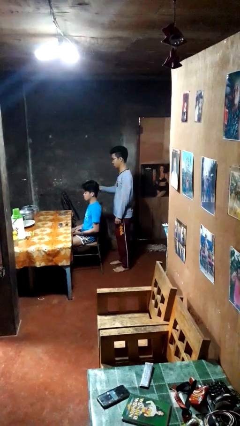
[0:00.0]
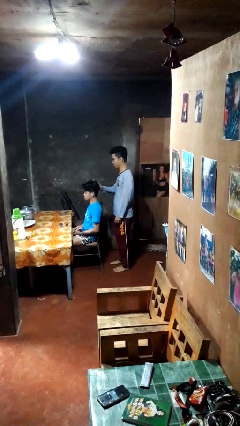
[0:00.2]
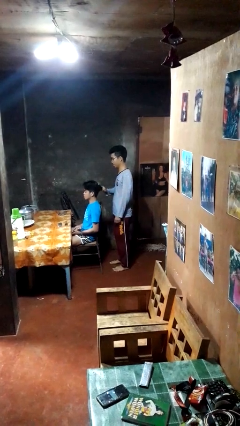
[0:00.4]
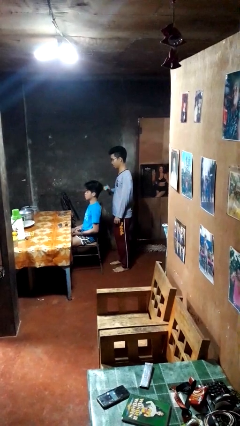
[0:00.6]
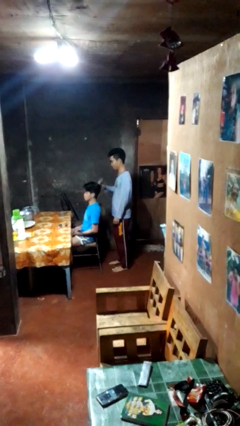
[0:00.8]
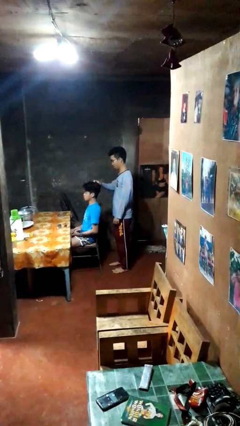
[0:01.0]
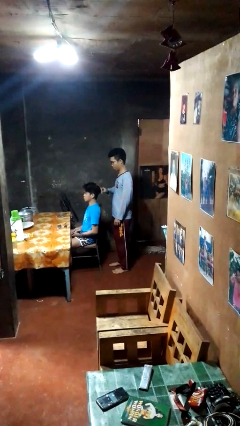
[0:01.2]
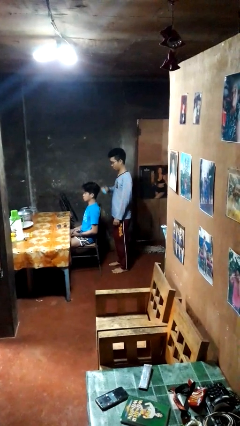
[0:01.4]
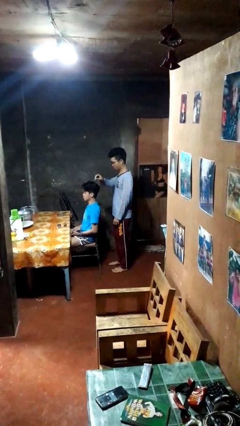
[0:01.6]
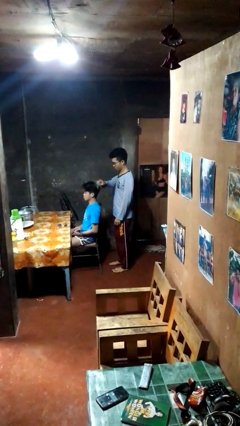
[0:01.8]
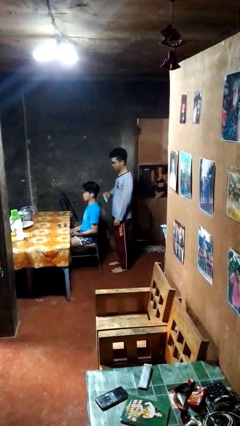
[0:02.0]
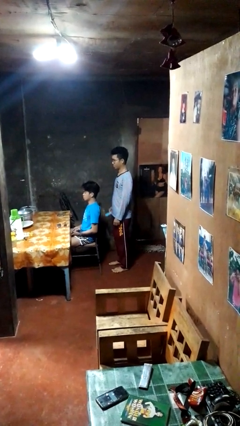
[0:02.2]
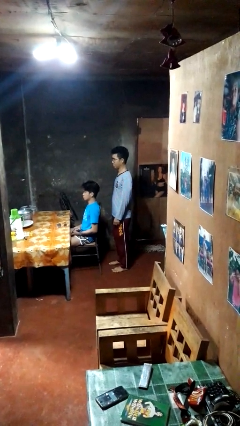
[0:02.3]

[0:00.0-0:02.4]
person brushes hair of person

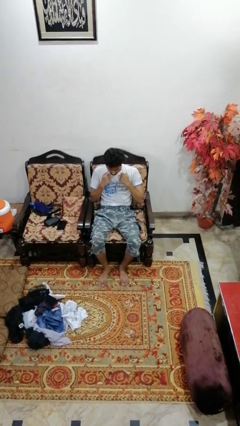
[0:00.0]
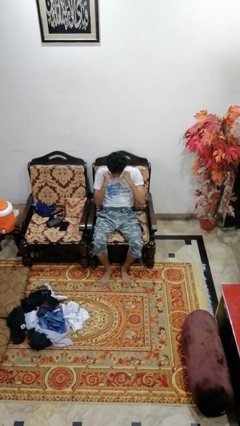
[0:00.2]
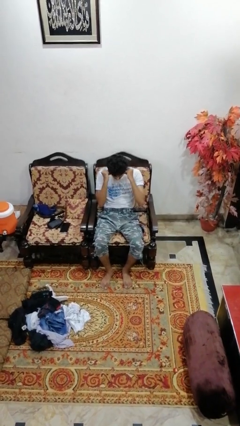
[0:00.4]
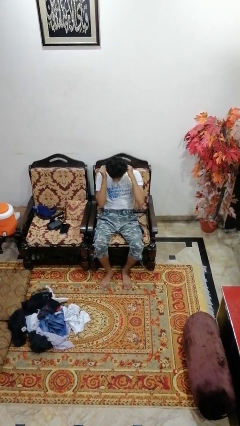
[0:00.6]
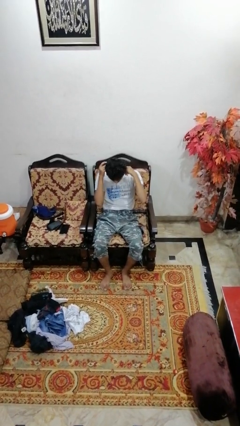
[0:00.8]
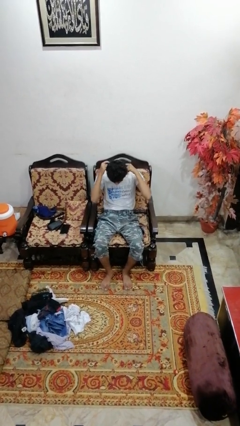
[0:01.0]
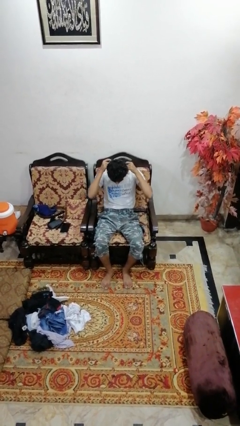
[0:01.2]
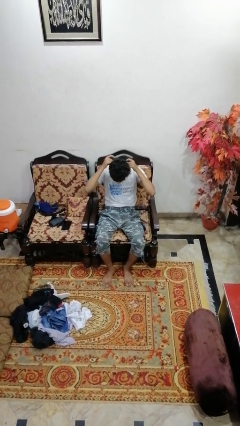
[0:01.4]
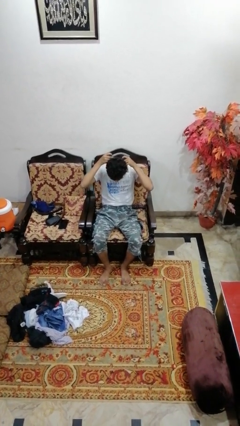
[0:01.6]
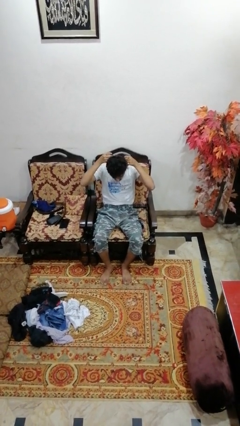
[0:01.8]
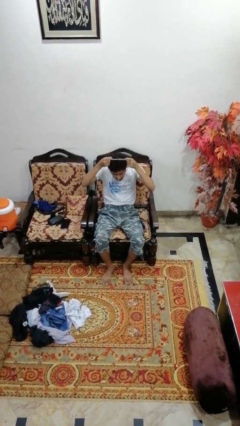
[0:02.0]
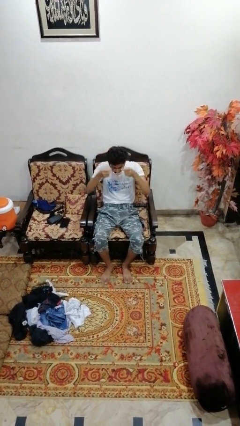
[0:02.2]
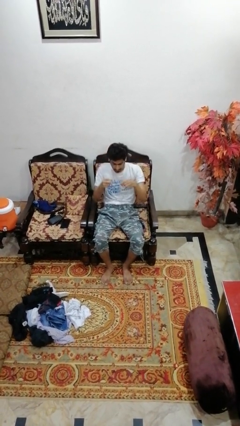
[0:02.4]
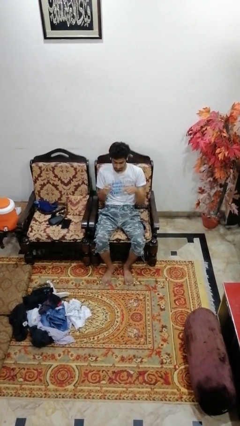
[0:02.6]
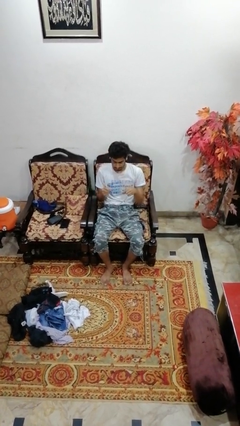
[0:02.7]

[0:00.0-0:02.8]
person takes off necklace

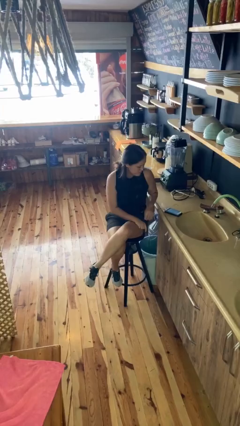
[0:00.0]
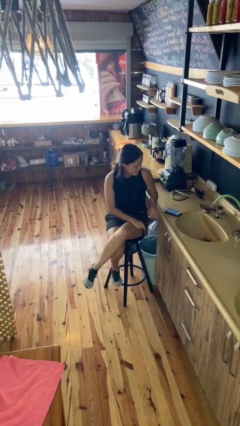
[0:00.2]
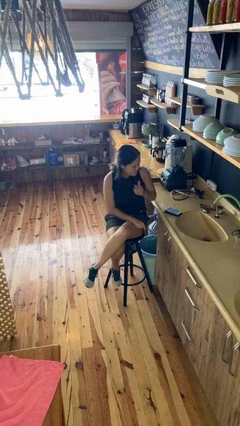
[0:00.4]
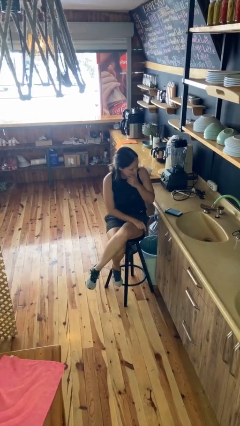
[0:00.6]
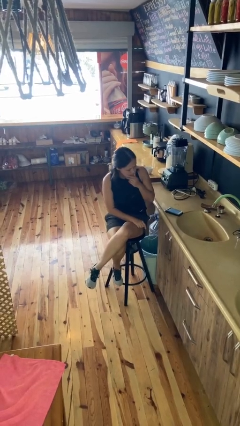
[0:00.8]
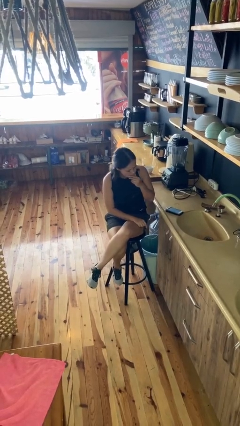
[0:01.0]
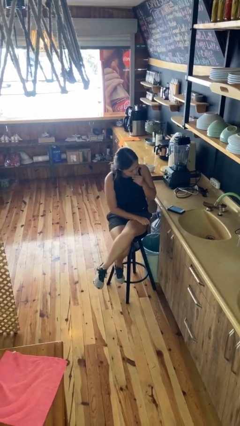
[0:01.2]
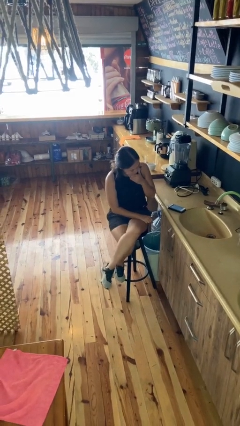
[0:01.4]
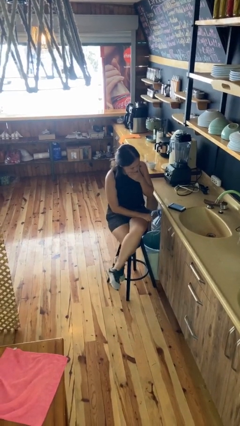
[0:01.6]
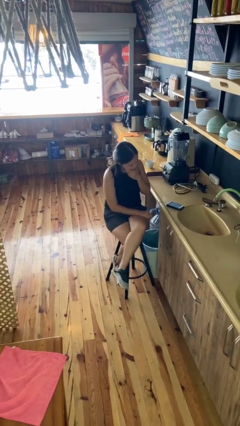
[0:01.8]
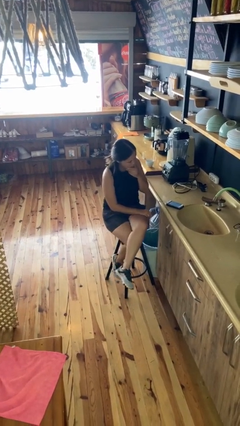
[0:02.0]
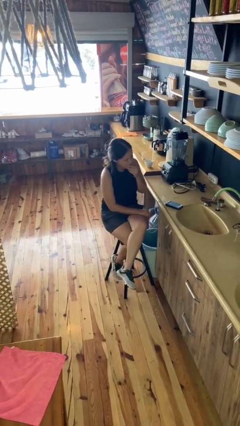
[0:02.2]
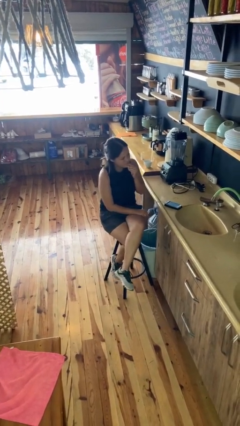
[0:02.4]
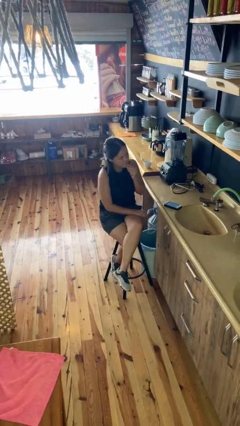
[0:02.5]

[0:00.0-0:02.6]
person strokes chin

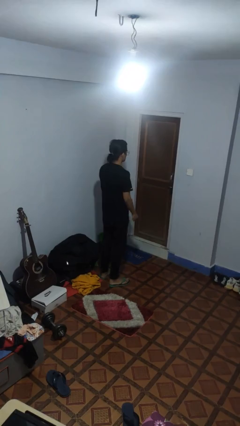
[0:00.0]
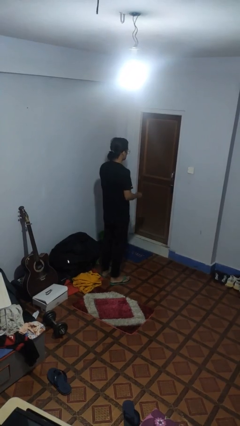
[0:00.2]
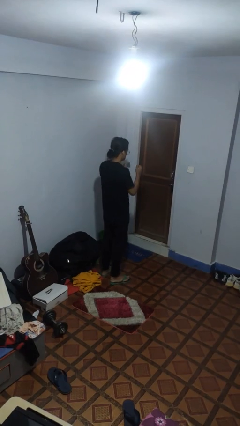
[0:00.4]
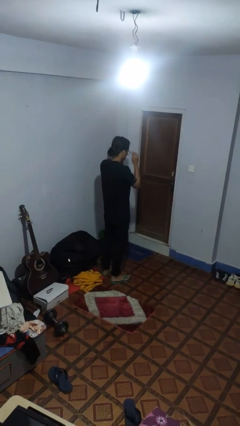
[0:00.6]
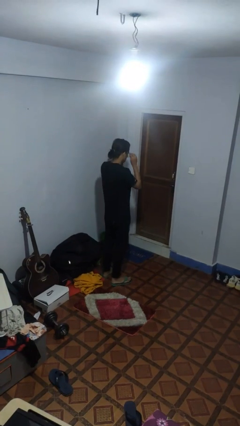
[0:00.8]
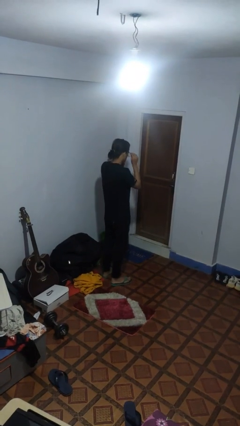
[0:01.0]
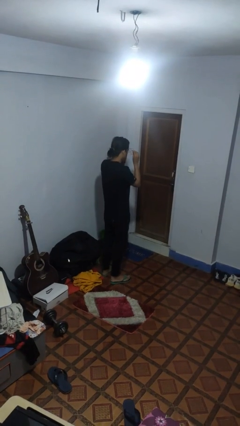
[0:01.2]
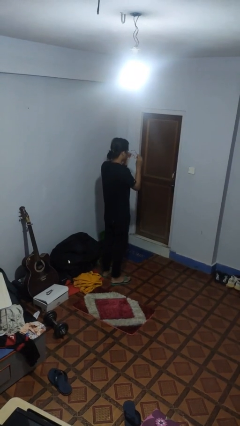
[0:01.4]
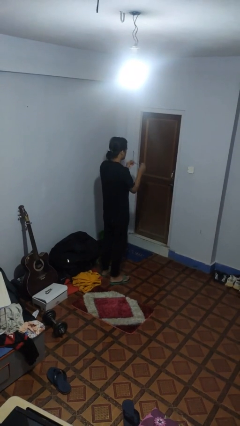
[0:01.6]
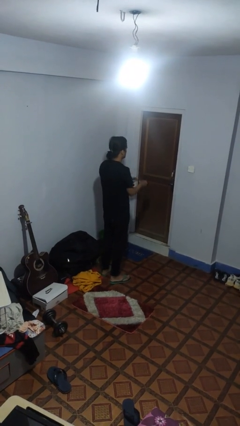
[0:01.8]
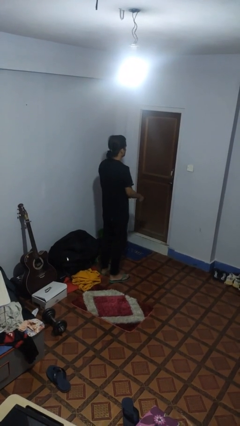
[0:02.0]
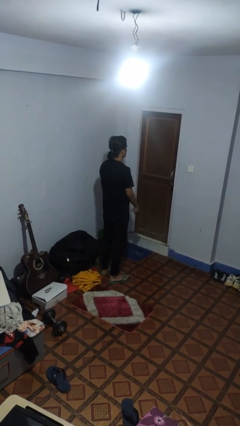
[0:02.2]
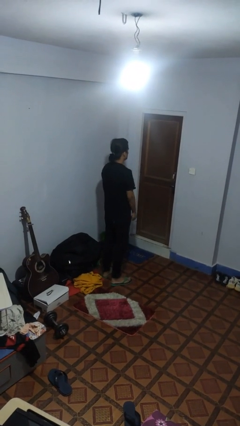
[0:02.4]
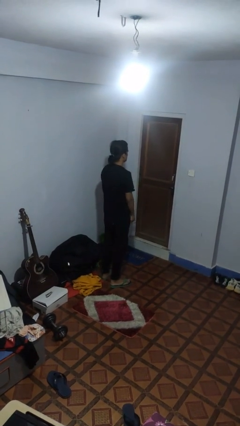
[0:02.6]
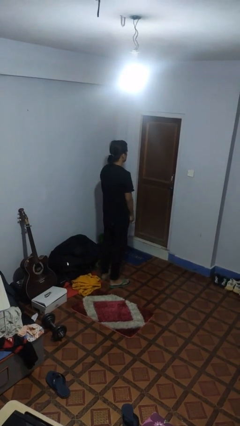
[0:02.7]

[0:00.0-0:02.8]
person takes off glasses

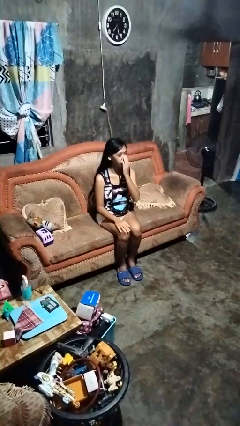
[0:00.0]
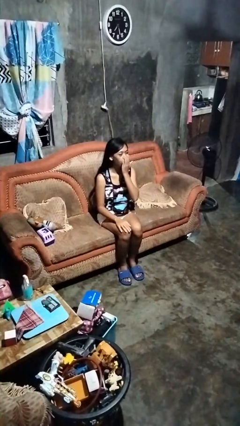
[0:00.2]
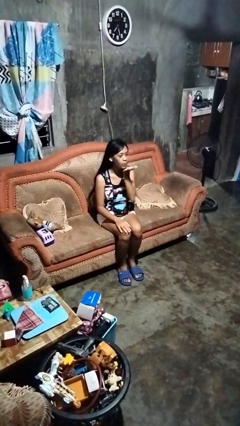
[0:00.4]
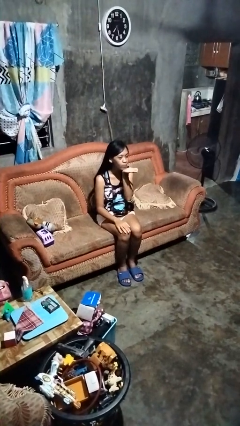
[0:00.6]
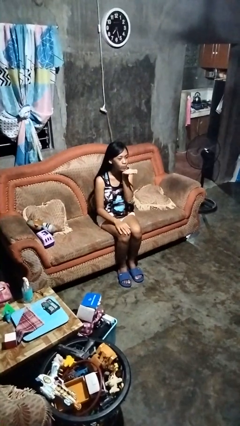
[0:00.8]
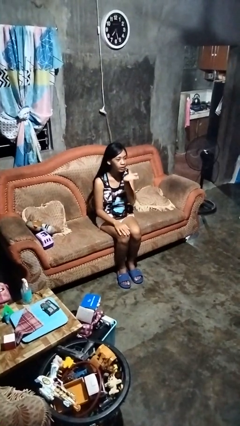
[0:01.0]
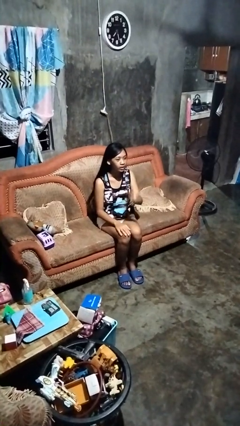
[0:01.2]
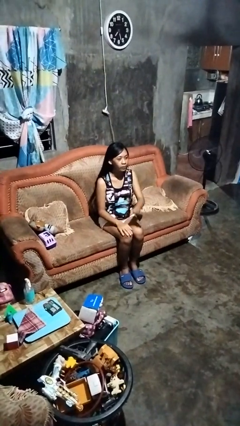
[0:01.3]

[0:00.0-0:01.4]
person gestures blow kiss

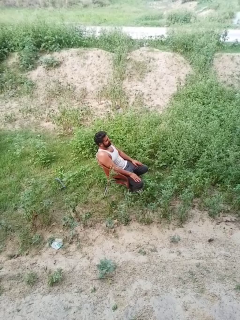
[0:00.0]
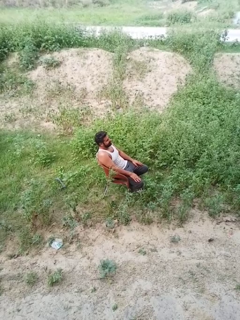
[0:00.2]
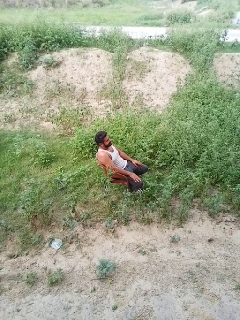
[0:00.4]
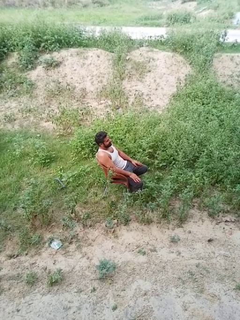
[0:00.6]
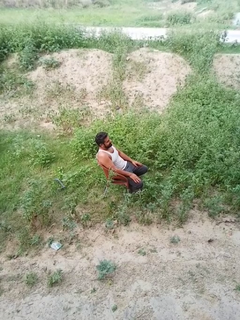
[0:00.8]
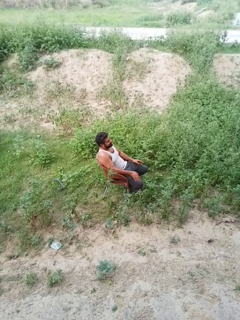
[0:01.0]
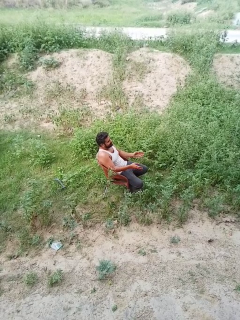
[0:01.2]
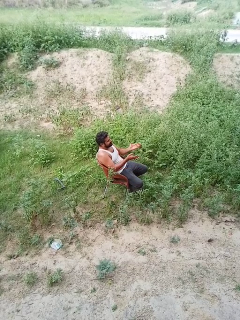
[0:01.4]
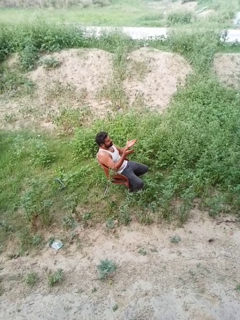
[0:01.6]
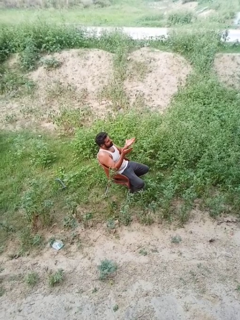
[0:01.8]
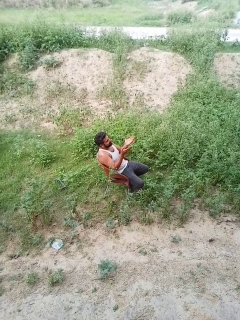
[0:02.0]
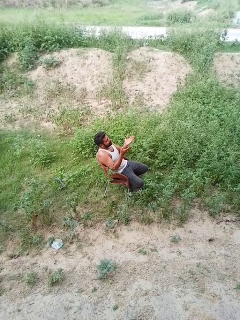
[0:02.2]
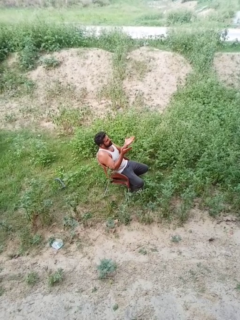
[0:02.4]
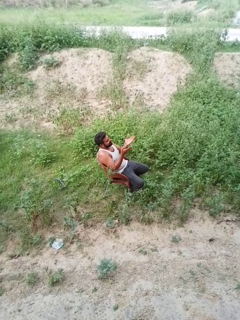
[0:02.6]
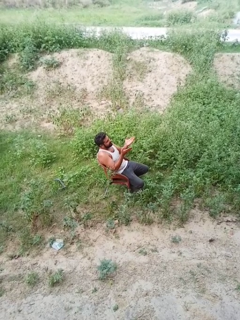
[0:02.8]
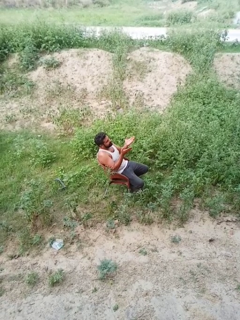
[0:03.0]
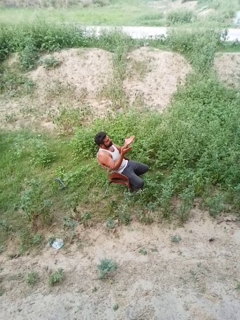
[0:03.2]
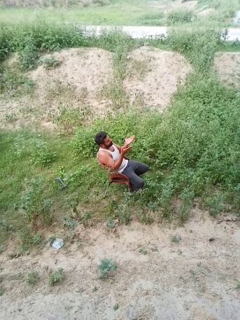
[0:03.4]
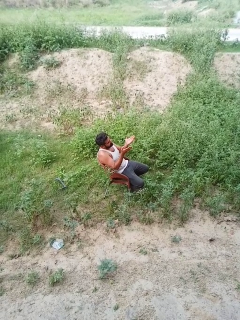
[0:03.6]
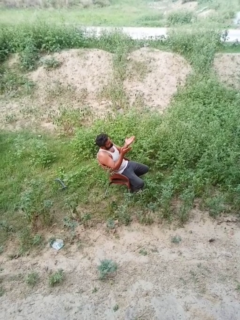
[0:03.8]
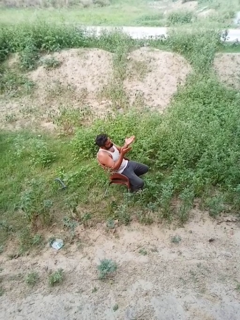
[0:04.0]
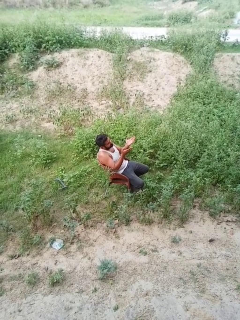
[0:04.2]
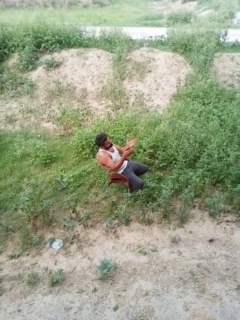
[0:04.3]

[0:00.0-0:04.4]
person prays

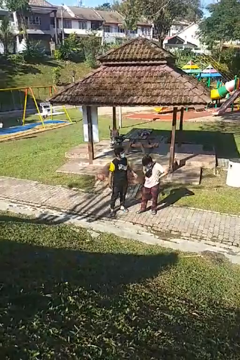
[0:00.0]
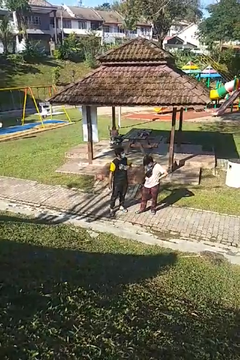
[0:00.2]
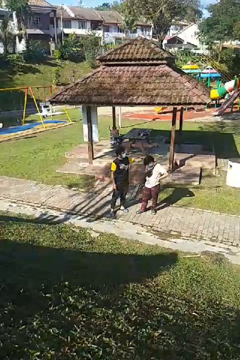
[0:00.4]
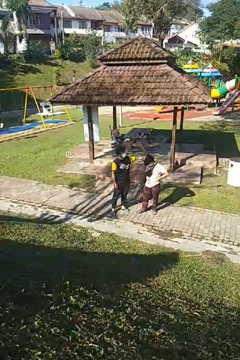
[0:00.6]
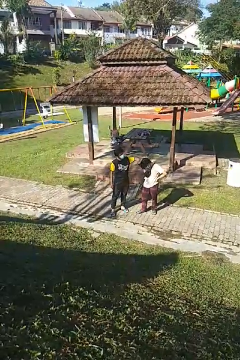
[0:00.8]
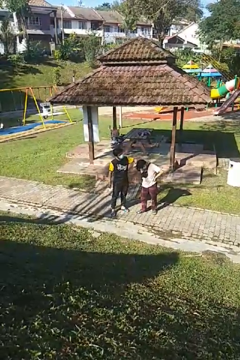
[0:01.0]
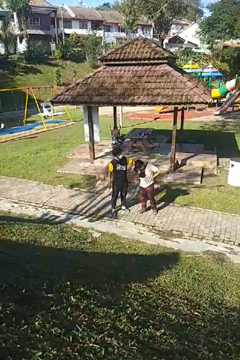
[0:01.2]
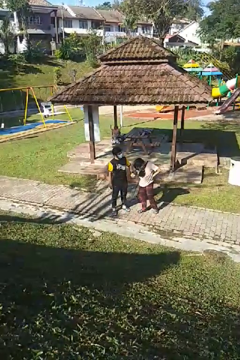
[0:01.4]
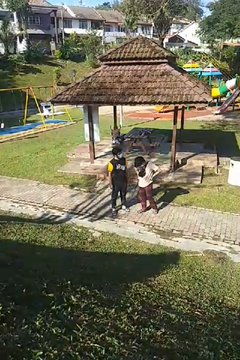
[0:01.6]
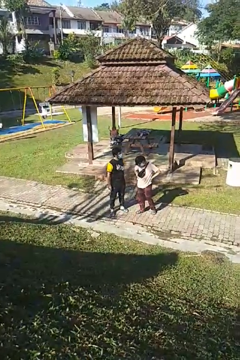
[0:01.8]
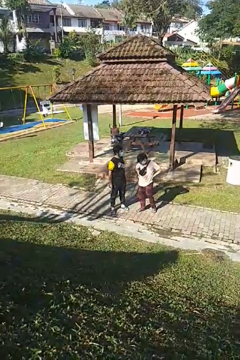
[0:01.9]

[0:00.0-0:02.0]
person grabs person by hair
